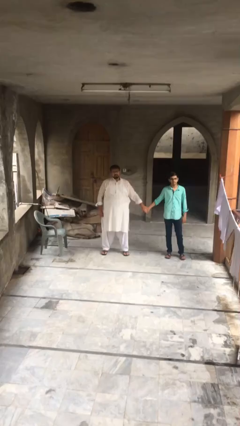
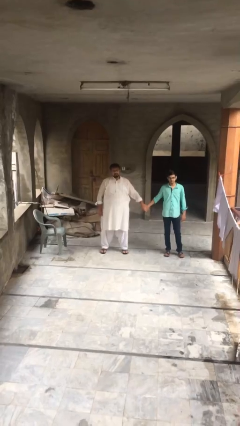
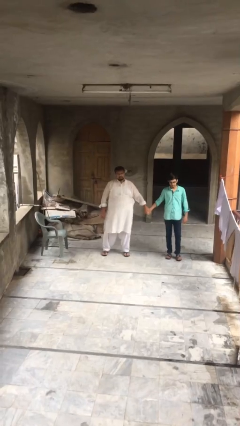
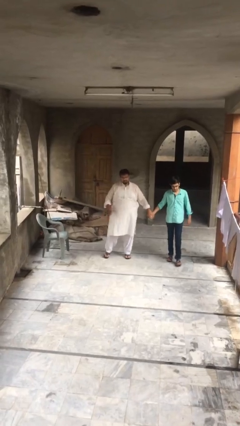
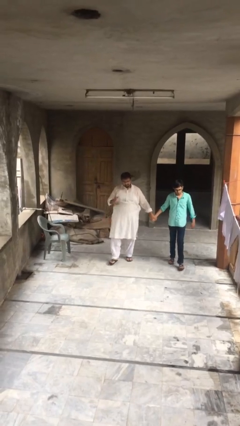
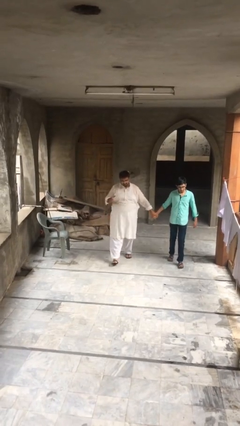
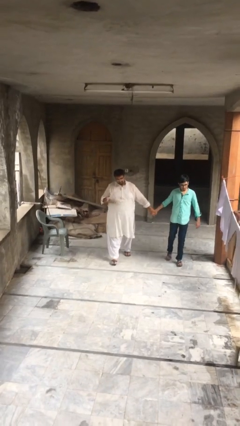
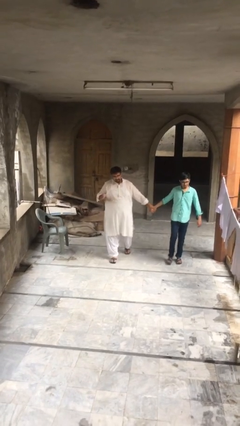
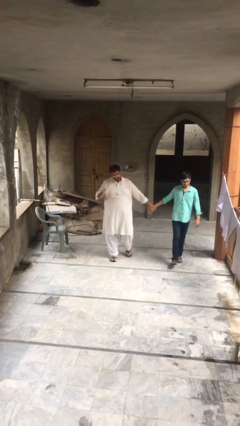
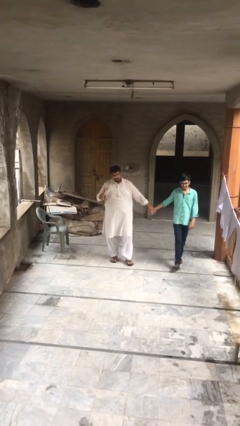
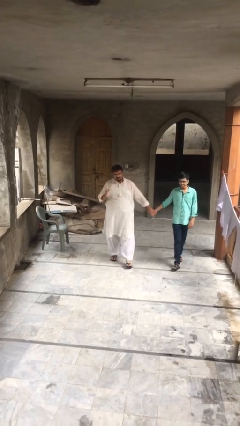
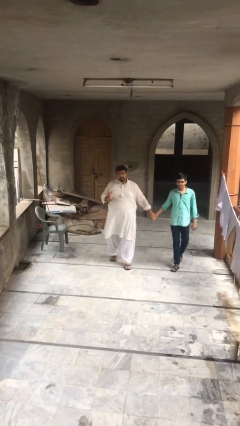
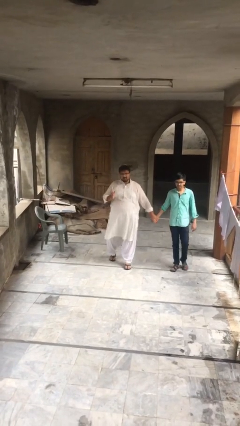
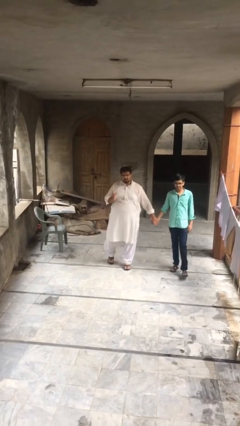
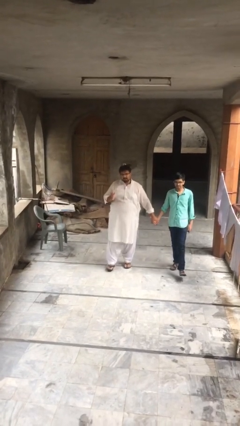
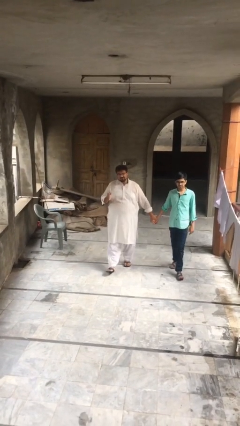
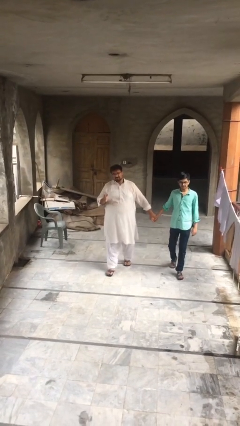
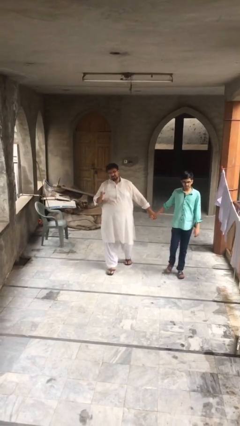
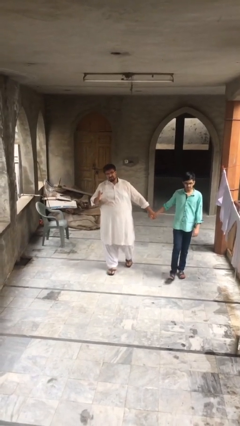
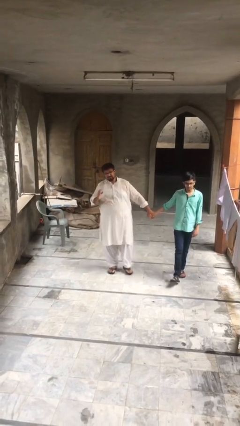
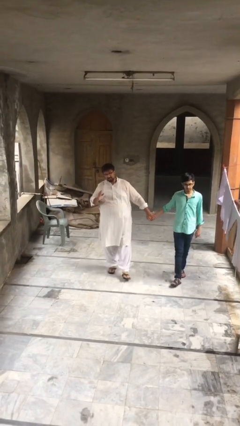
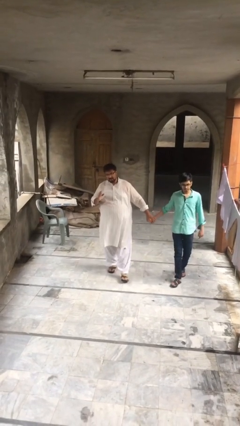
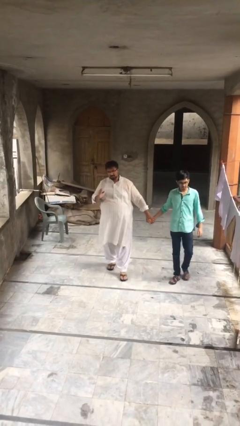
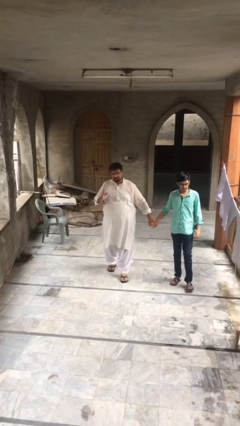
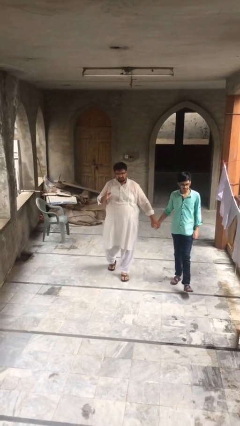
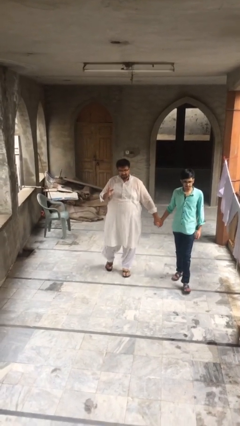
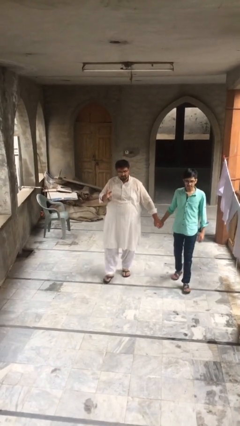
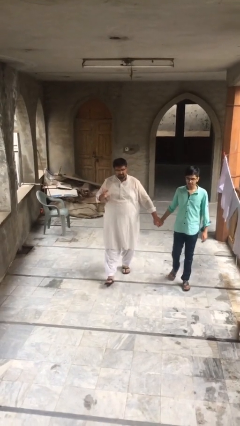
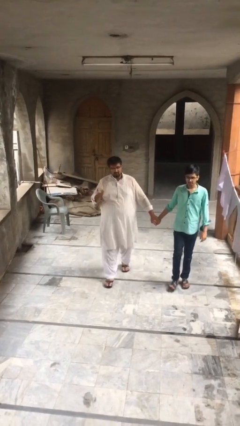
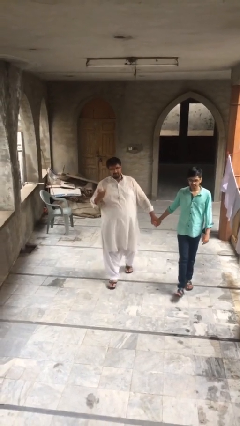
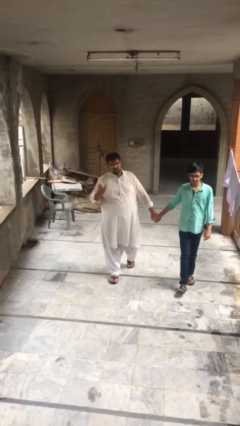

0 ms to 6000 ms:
person holds hand

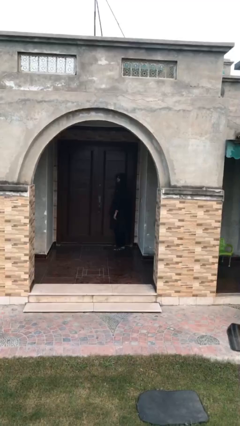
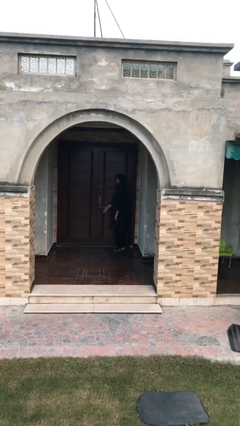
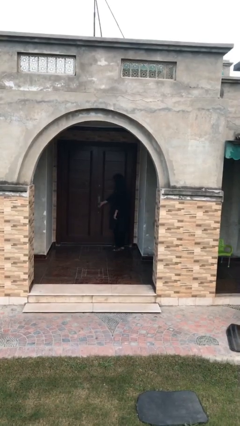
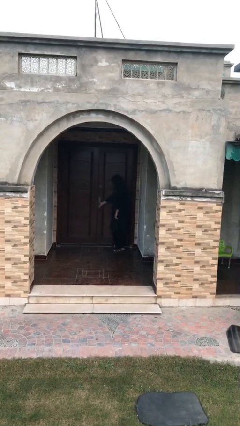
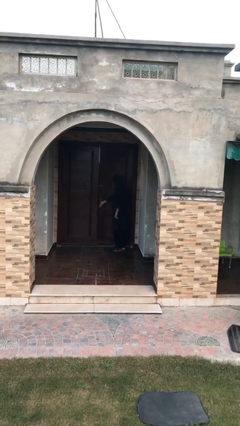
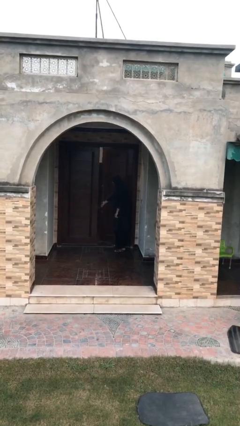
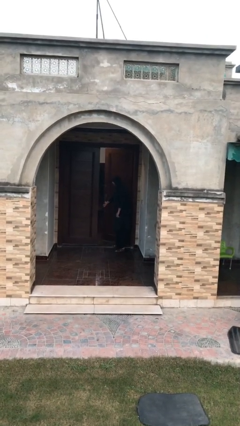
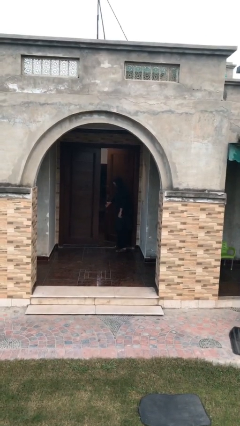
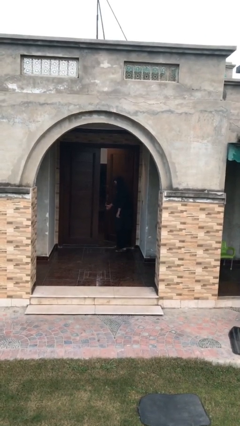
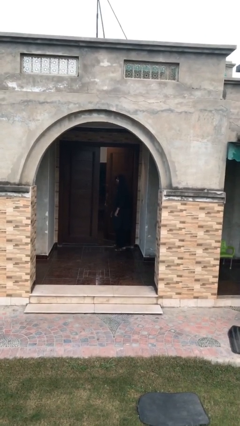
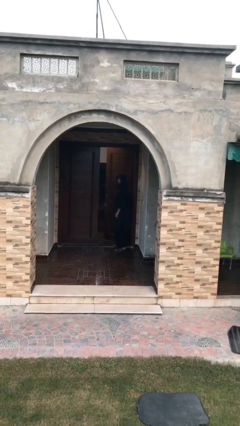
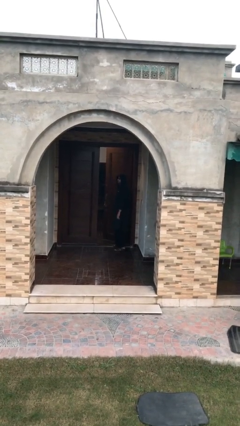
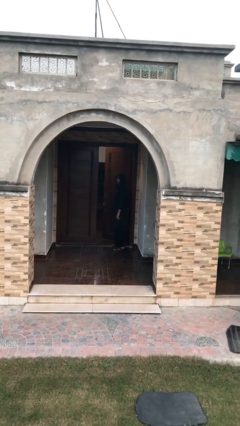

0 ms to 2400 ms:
person opens facility door

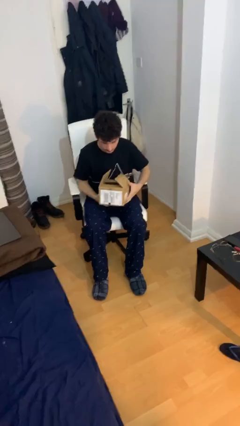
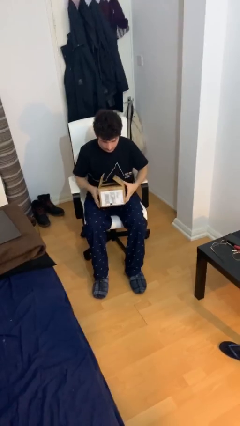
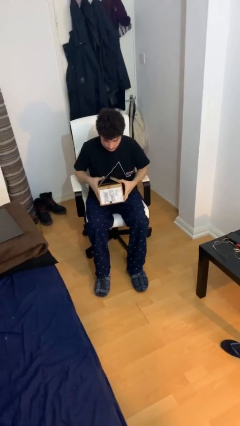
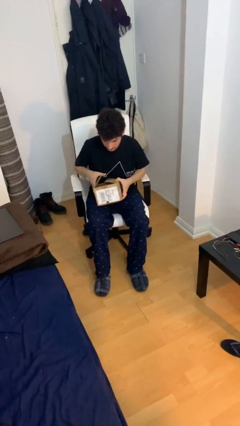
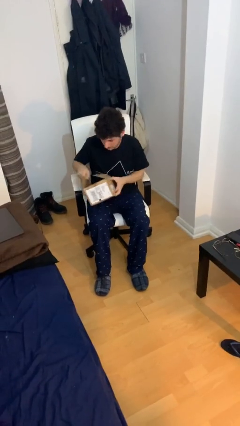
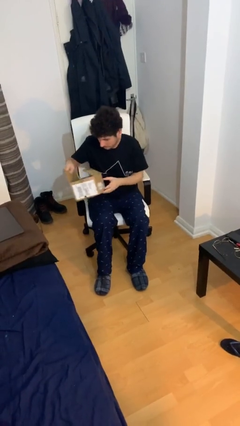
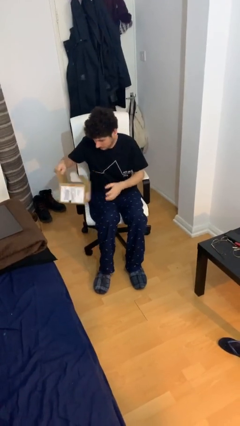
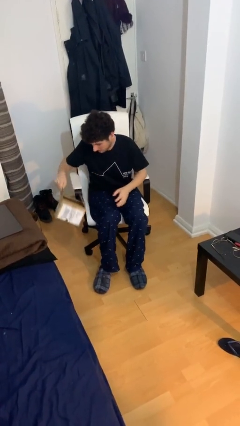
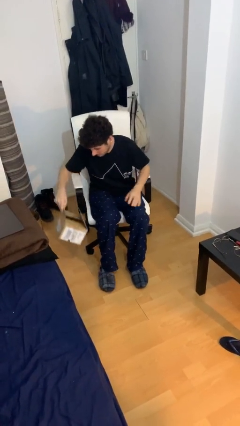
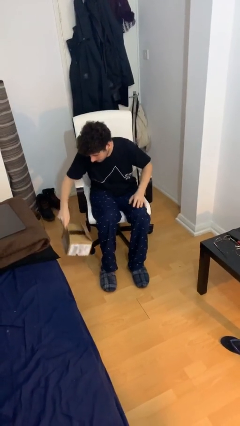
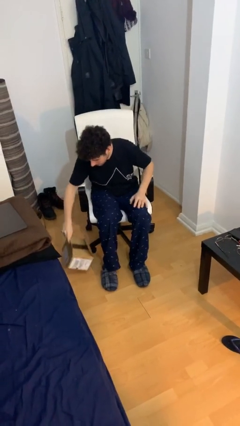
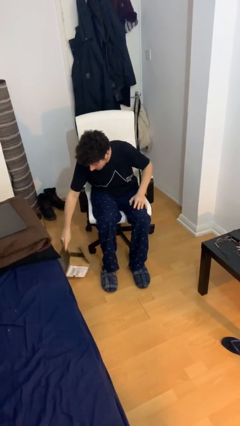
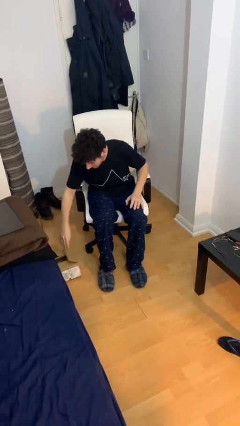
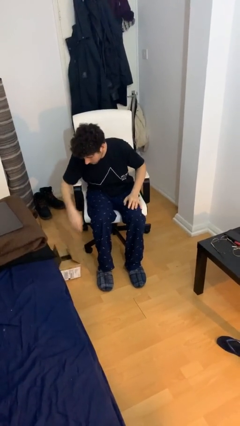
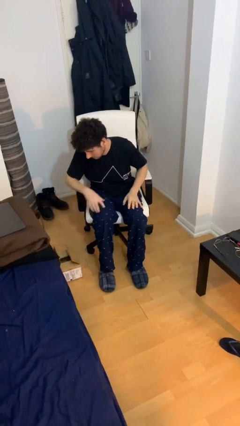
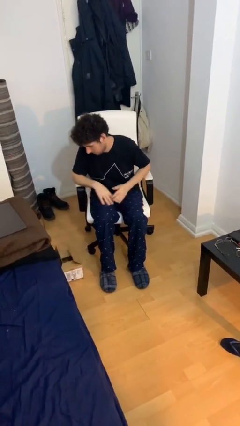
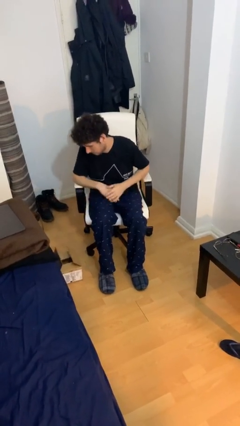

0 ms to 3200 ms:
person puts down object on floor

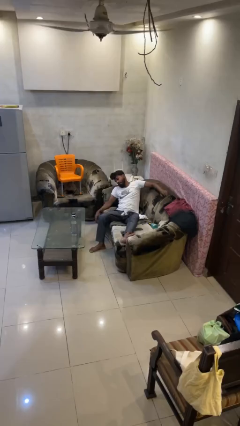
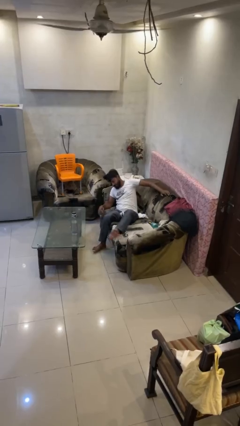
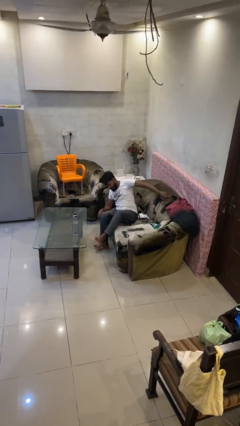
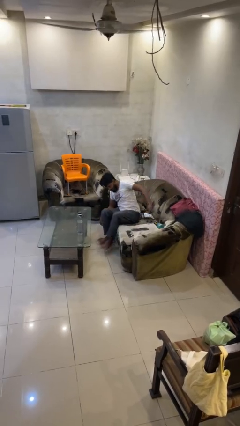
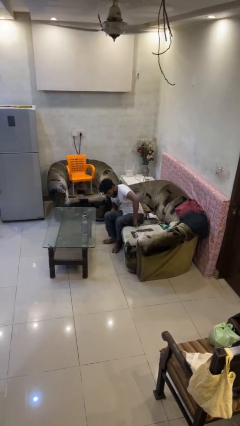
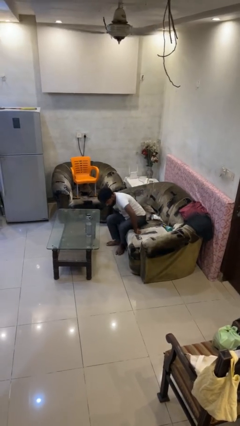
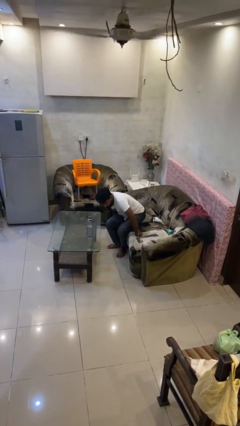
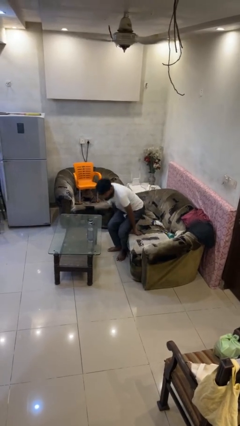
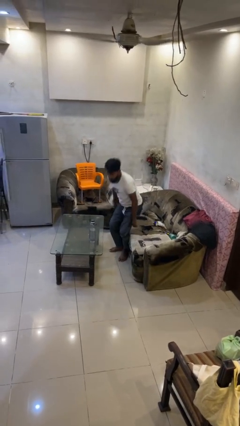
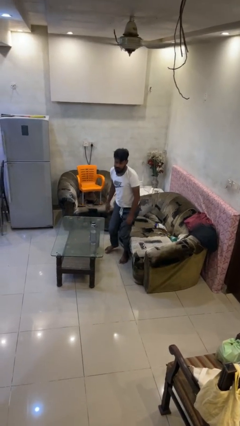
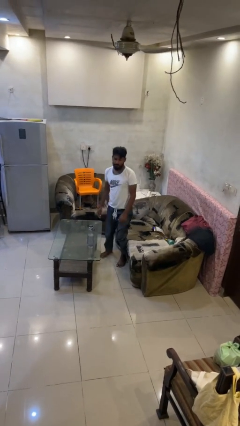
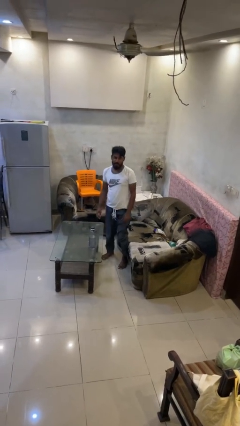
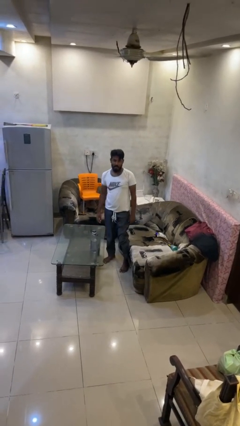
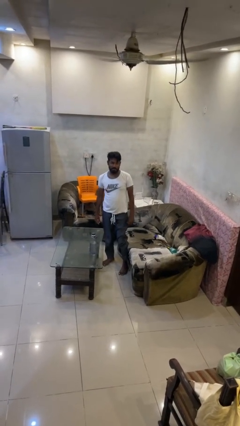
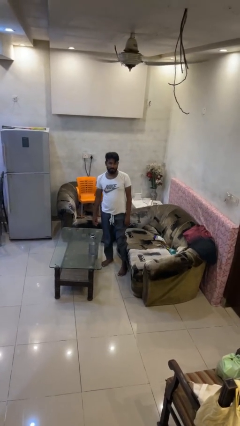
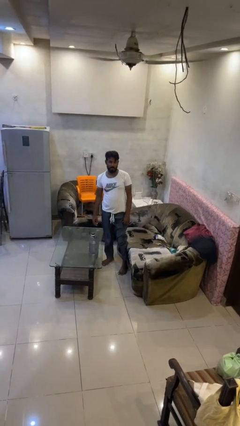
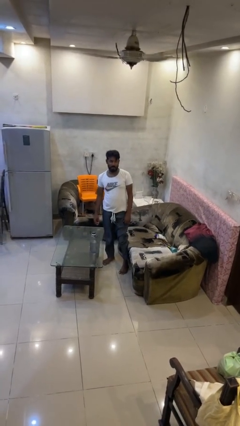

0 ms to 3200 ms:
person stands up

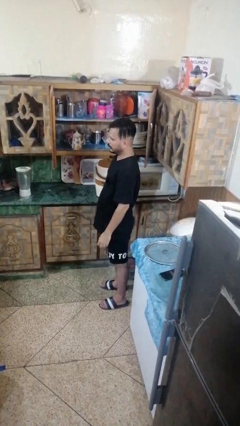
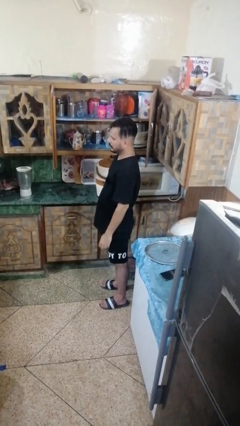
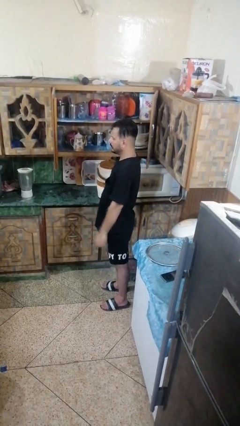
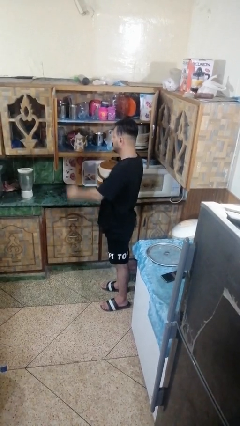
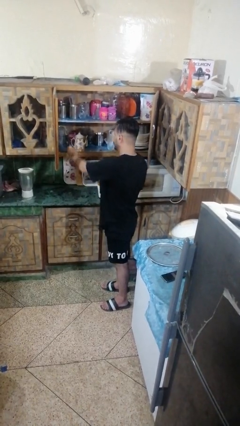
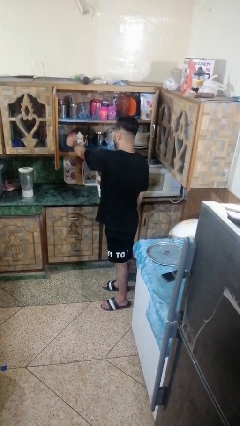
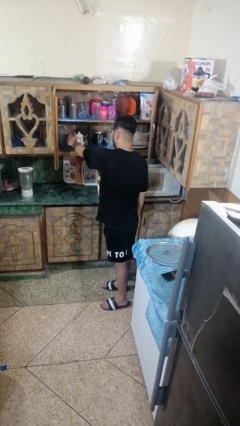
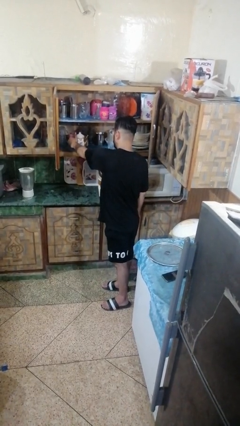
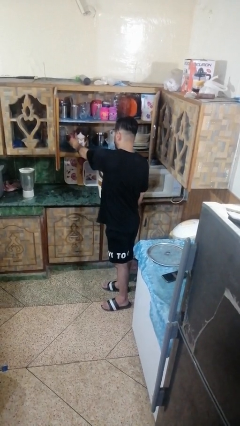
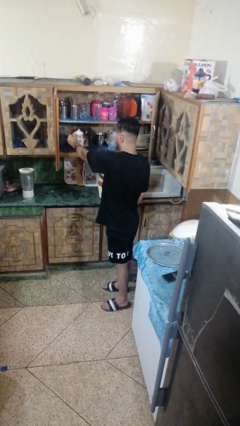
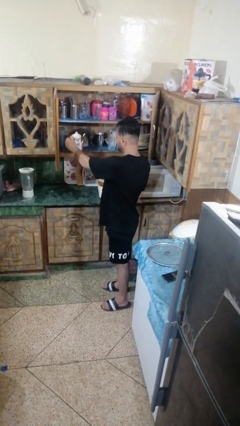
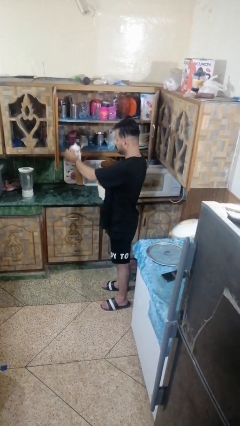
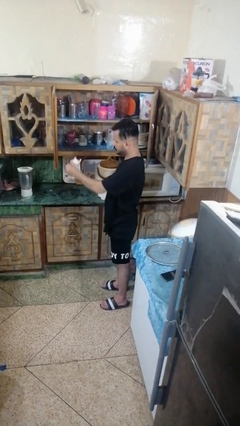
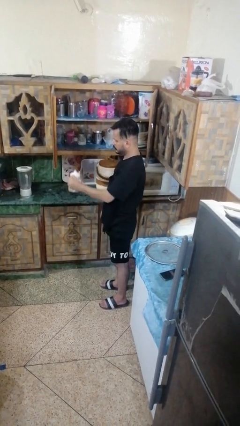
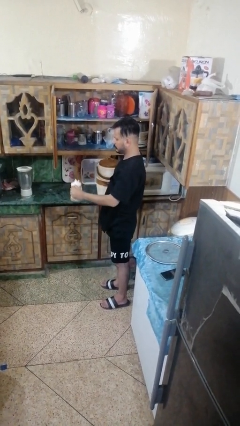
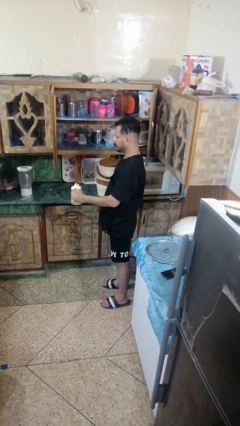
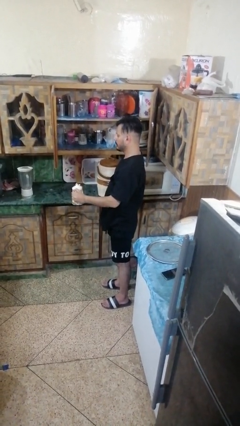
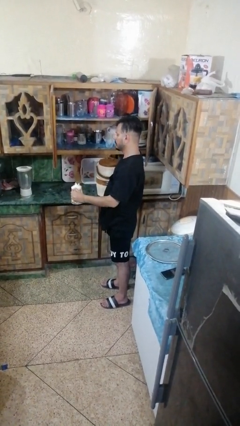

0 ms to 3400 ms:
person picks up object from cabinet
